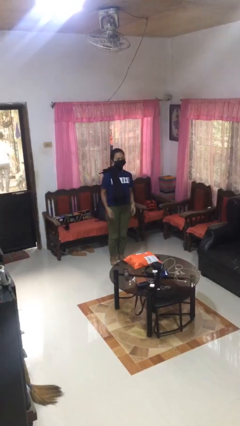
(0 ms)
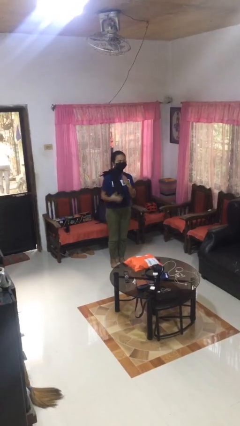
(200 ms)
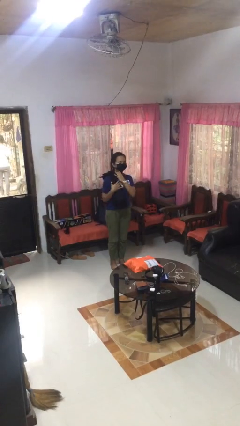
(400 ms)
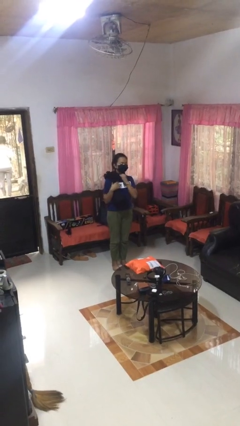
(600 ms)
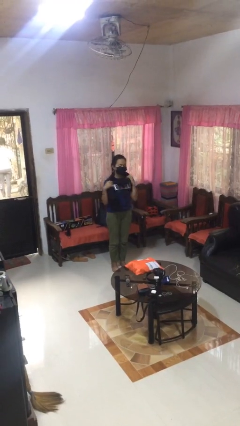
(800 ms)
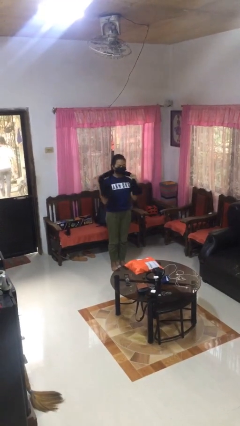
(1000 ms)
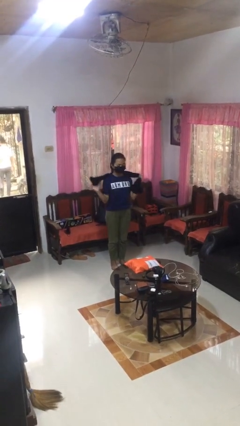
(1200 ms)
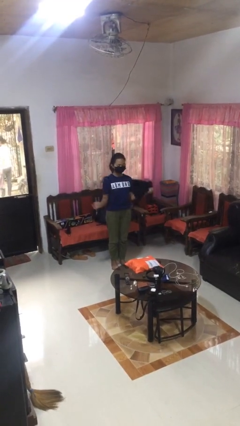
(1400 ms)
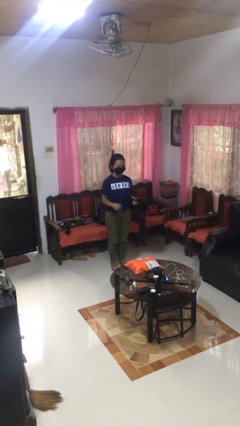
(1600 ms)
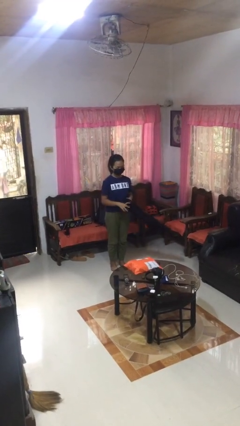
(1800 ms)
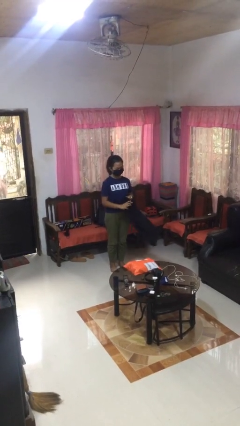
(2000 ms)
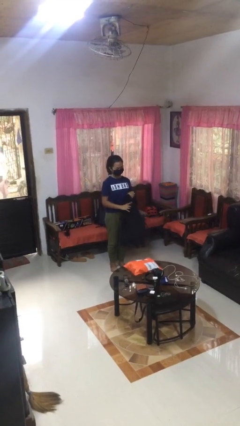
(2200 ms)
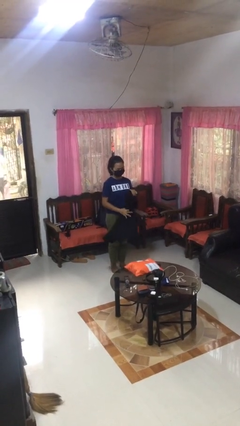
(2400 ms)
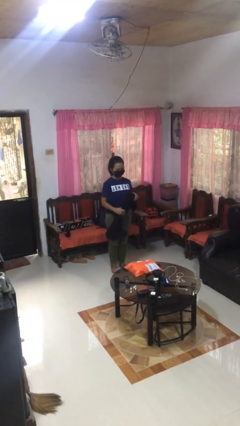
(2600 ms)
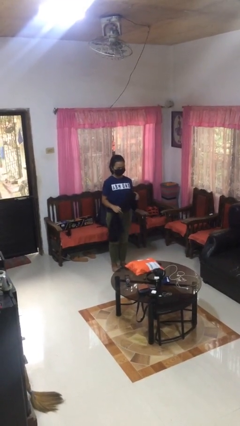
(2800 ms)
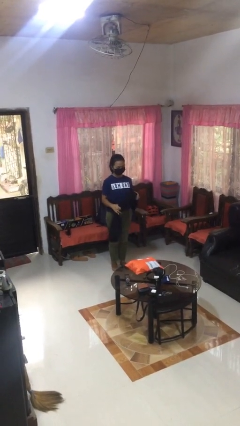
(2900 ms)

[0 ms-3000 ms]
person takes off scarf

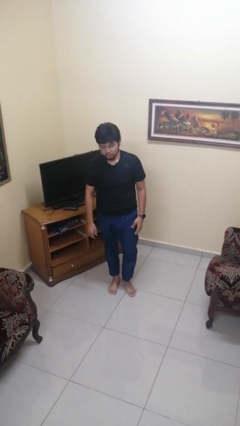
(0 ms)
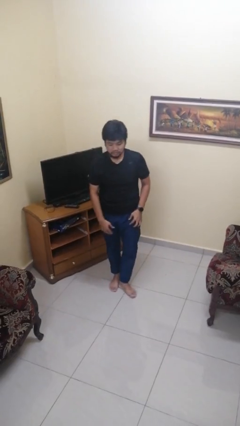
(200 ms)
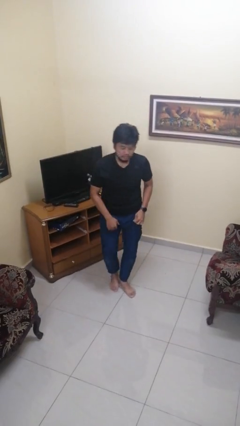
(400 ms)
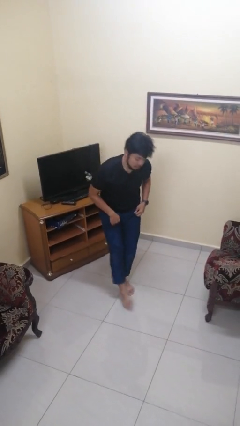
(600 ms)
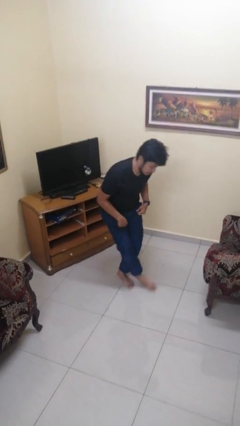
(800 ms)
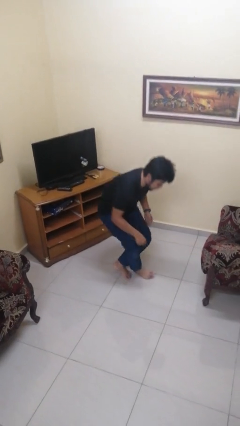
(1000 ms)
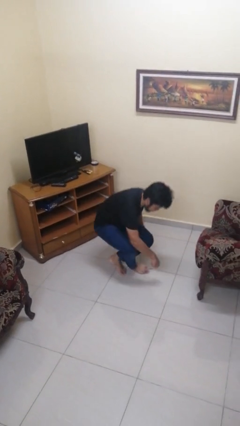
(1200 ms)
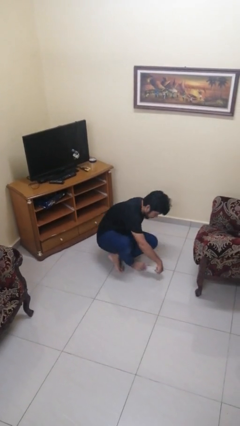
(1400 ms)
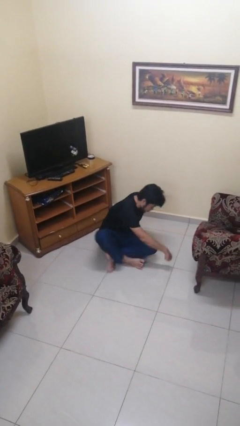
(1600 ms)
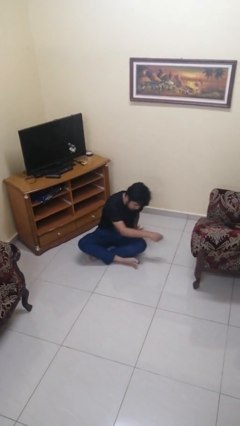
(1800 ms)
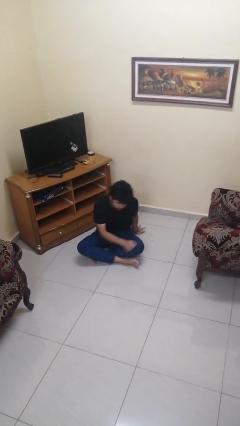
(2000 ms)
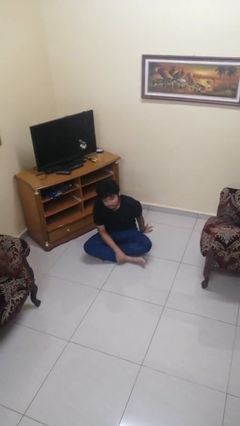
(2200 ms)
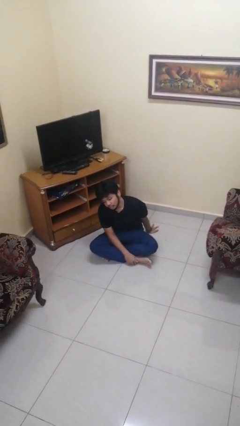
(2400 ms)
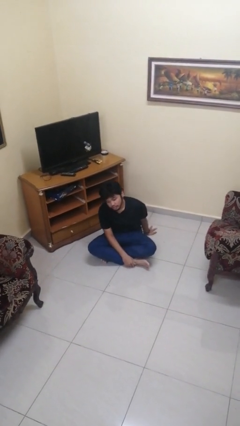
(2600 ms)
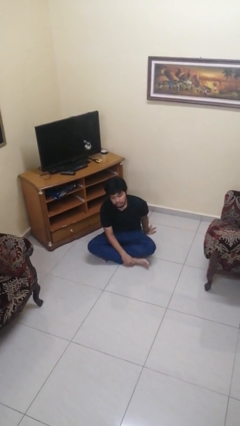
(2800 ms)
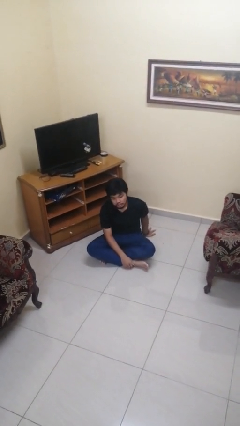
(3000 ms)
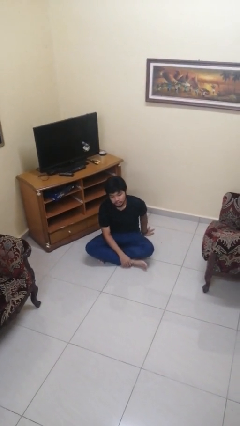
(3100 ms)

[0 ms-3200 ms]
person sits crisscross

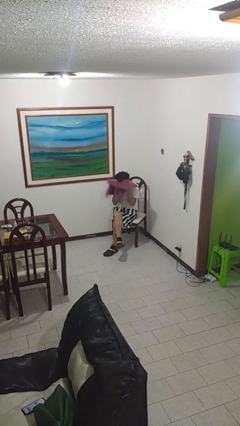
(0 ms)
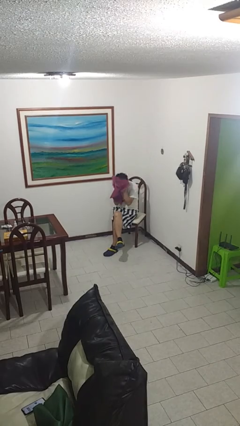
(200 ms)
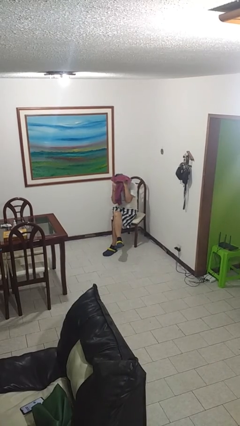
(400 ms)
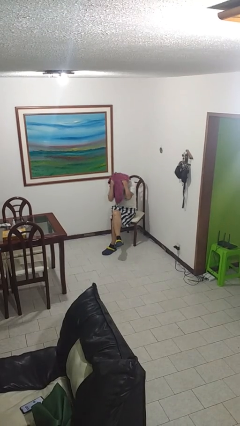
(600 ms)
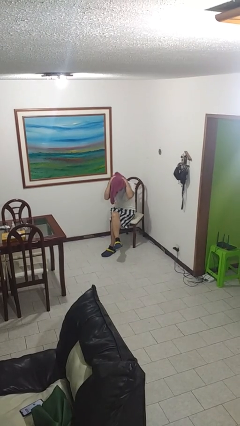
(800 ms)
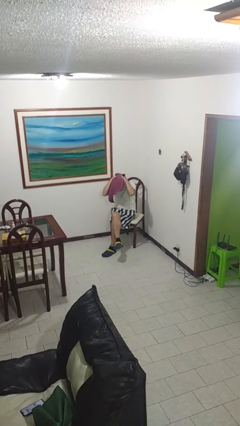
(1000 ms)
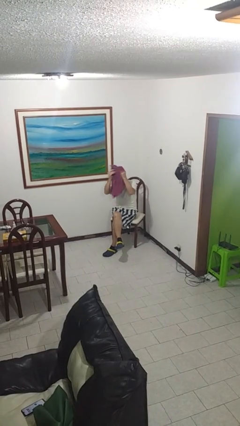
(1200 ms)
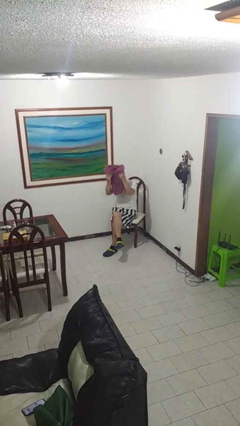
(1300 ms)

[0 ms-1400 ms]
person dries hair with towel

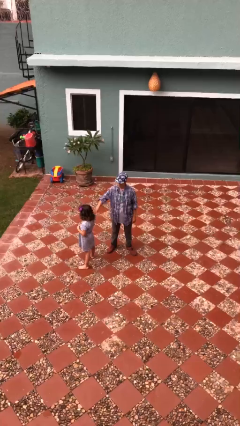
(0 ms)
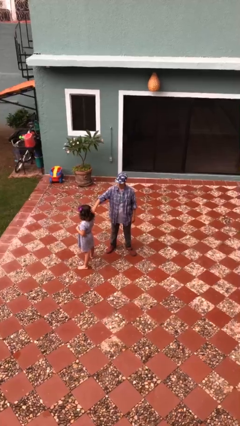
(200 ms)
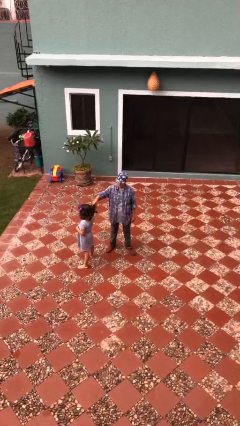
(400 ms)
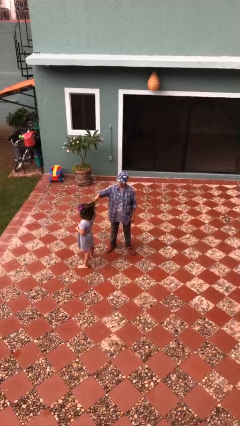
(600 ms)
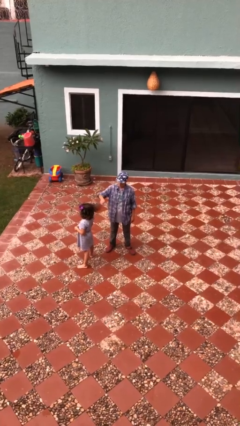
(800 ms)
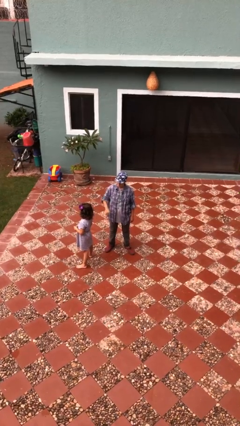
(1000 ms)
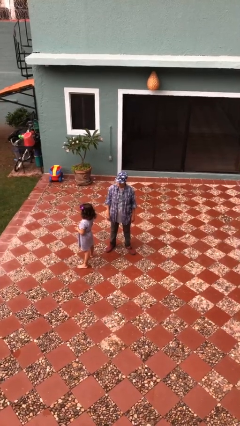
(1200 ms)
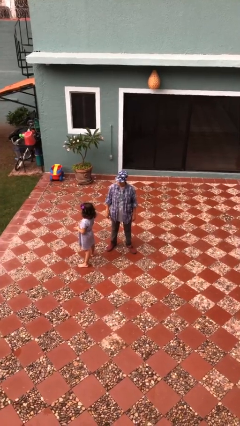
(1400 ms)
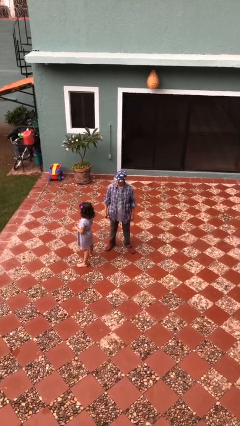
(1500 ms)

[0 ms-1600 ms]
person grabs person by hair

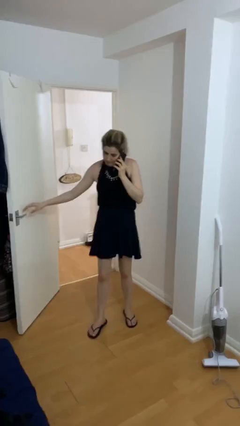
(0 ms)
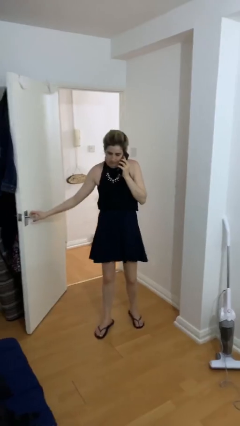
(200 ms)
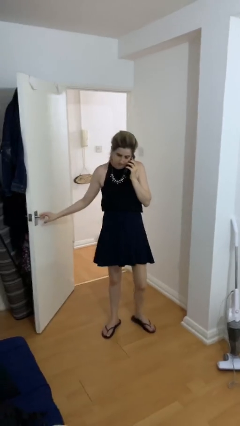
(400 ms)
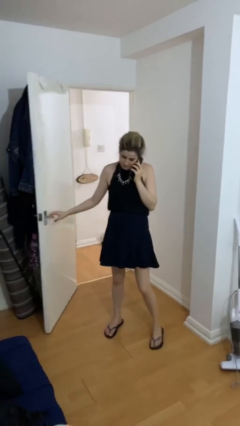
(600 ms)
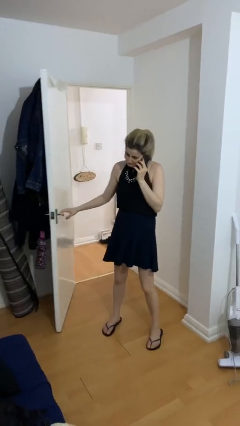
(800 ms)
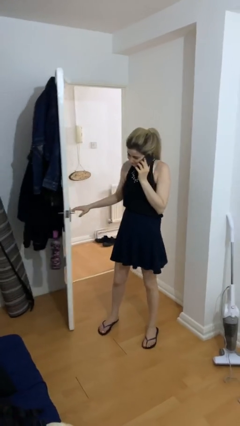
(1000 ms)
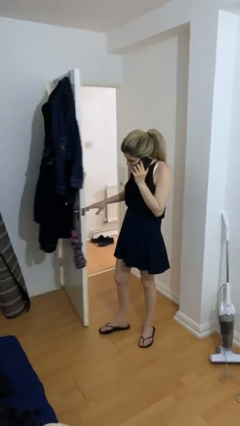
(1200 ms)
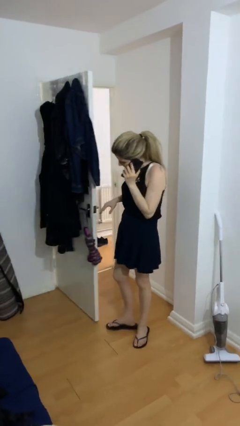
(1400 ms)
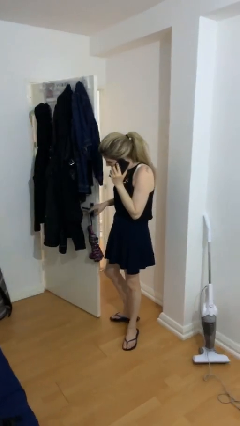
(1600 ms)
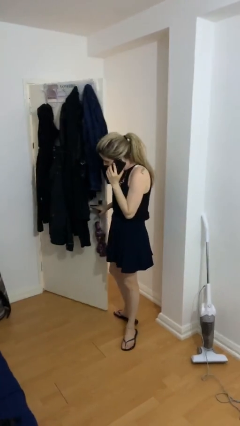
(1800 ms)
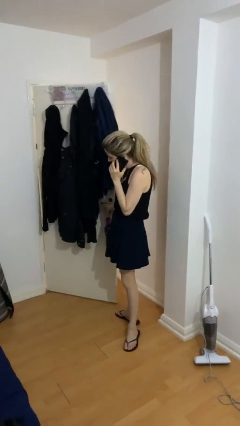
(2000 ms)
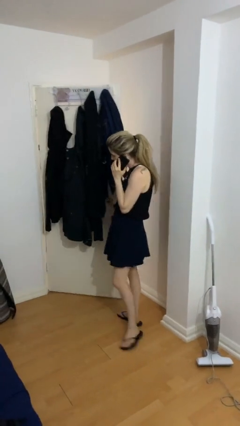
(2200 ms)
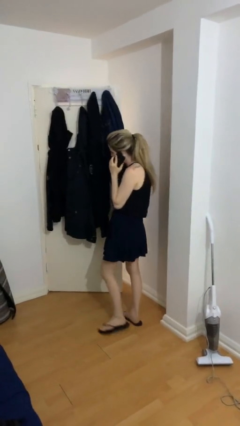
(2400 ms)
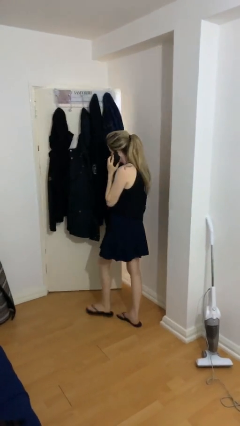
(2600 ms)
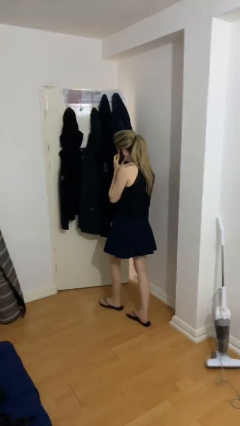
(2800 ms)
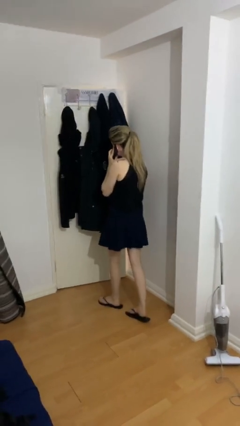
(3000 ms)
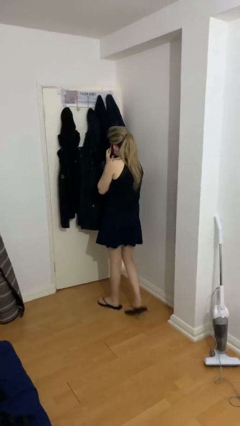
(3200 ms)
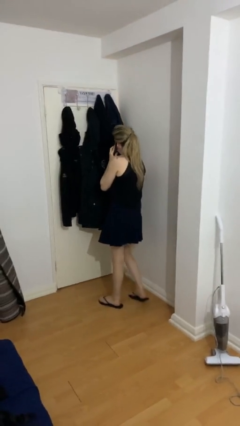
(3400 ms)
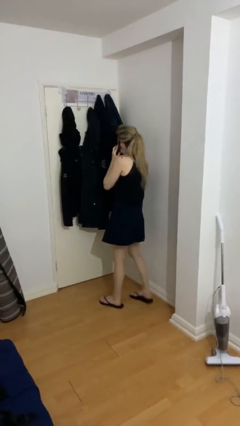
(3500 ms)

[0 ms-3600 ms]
person closes facility door

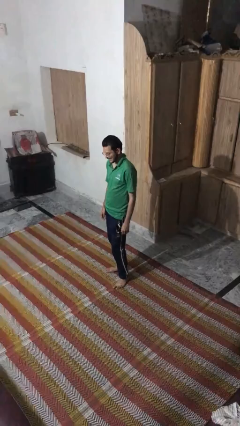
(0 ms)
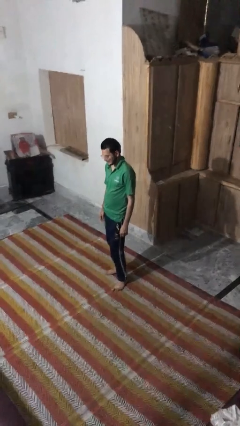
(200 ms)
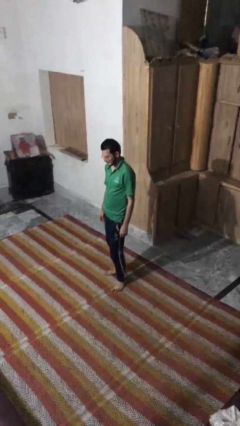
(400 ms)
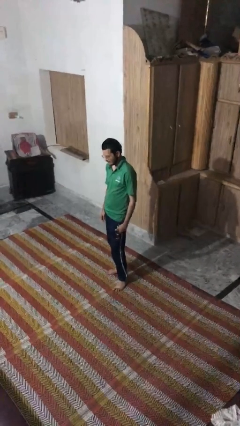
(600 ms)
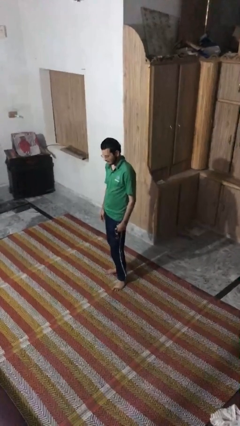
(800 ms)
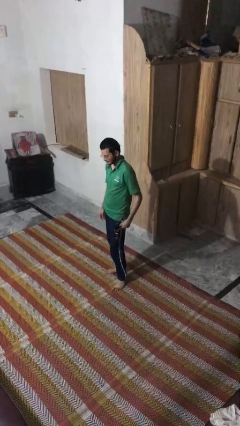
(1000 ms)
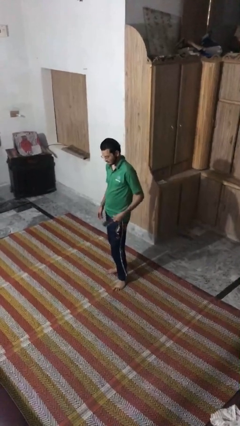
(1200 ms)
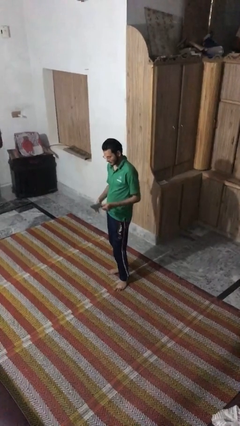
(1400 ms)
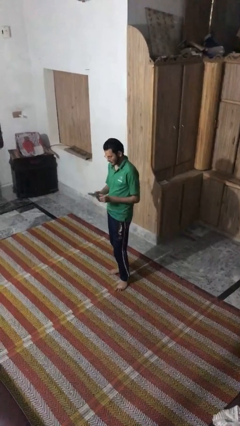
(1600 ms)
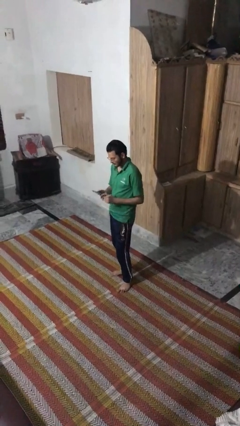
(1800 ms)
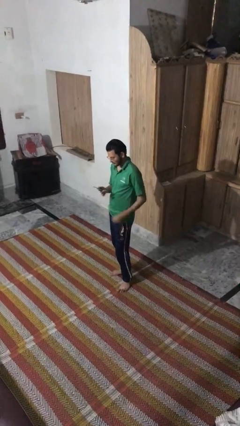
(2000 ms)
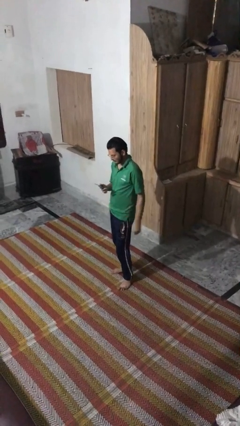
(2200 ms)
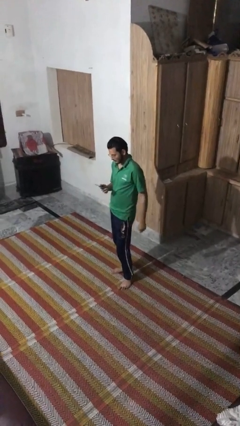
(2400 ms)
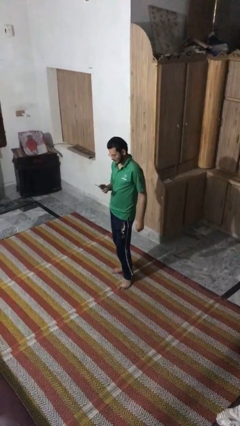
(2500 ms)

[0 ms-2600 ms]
person takes phone from pocket

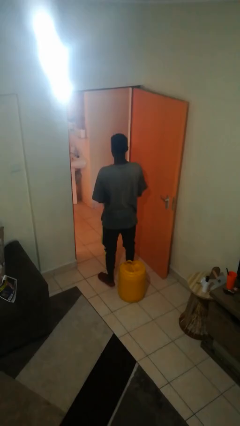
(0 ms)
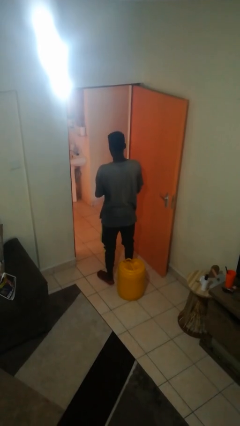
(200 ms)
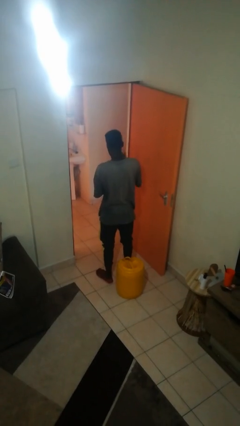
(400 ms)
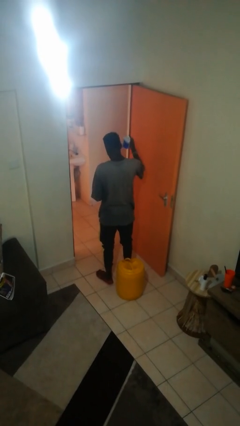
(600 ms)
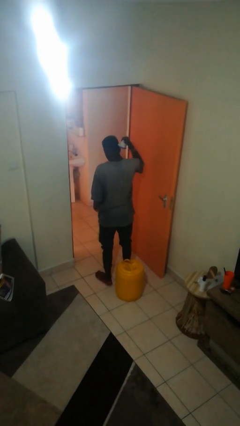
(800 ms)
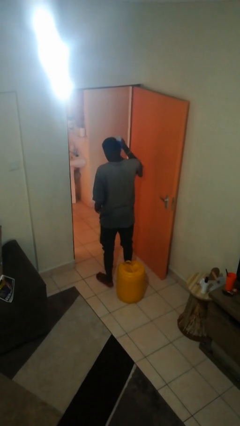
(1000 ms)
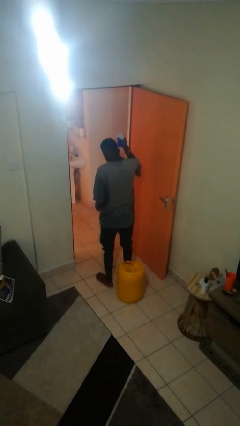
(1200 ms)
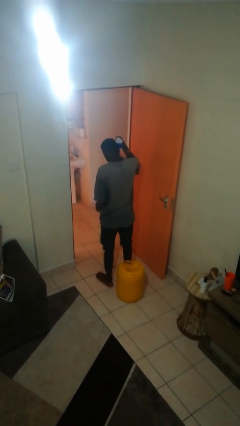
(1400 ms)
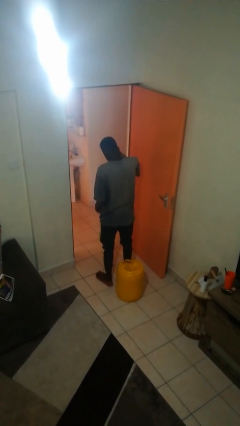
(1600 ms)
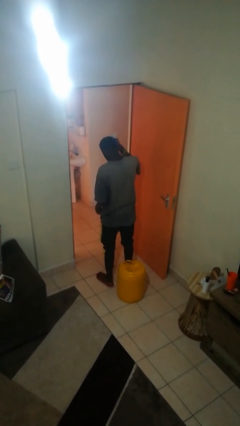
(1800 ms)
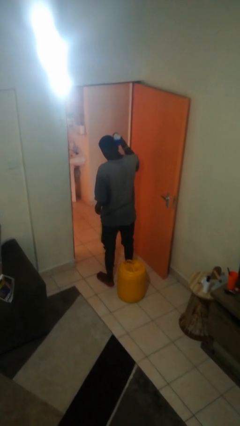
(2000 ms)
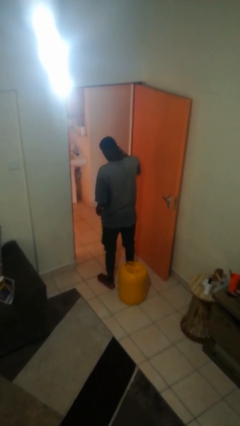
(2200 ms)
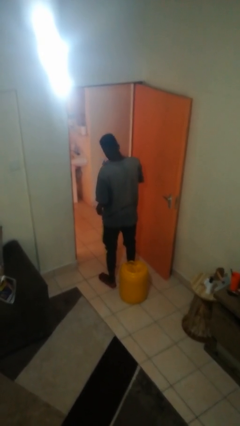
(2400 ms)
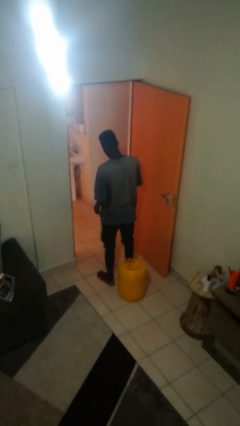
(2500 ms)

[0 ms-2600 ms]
person brushes hair
